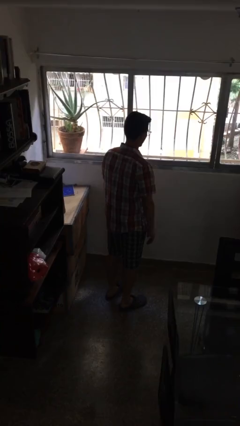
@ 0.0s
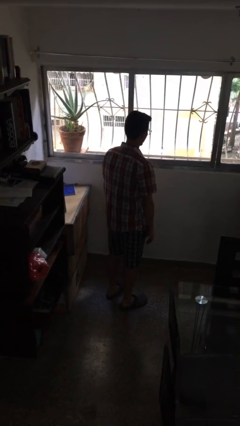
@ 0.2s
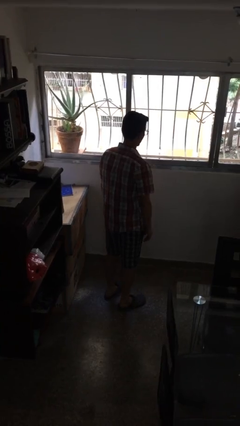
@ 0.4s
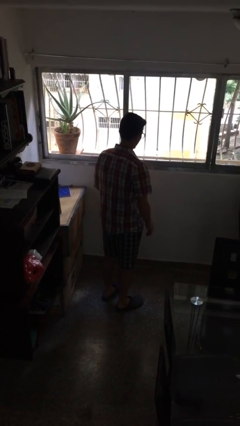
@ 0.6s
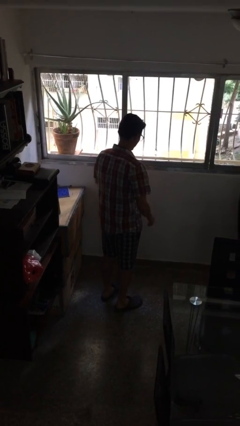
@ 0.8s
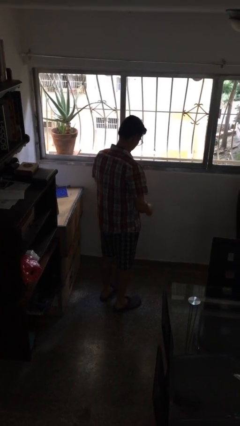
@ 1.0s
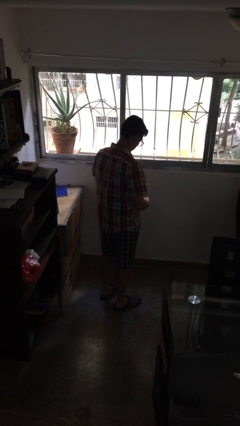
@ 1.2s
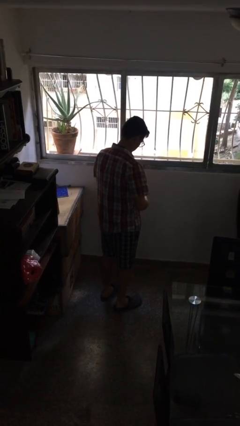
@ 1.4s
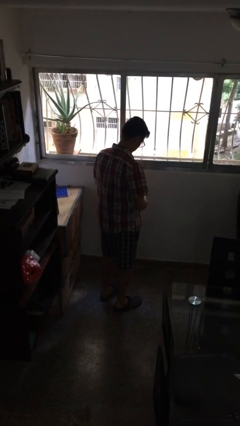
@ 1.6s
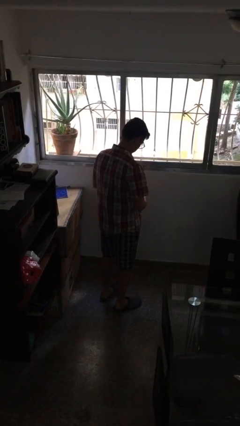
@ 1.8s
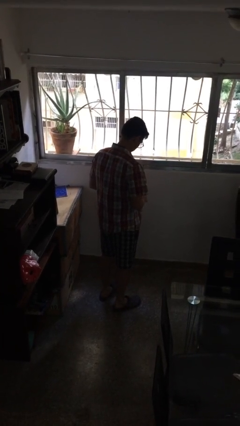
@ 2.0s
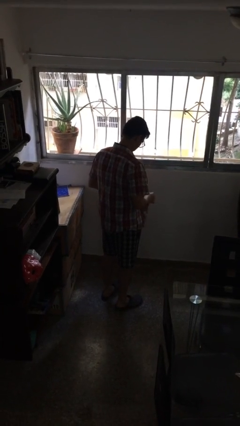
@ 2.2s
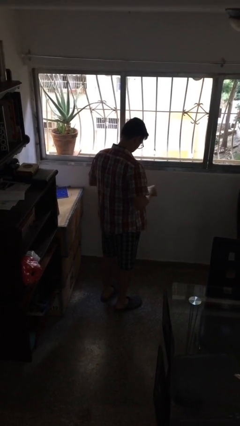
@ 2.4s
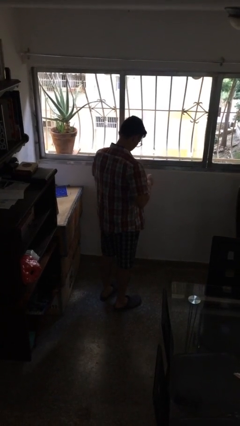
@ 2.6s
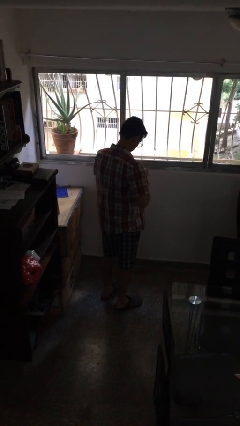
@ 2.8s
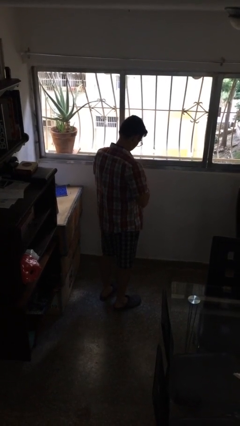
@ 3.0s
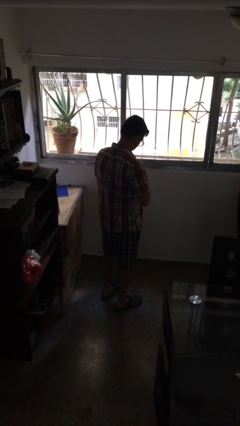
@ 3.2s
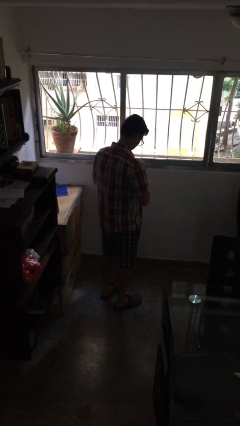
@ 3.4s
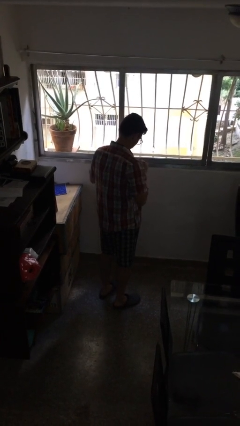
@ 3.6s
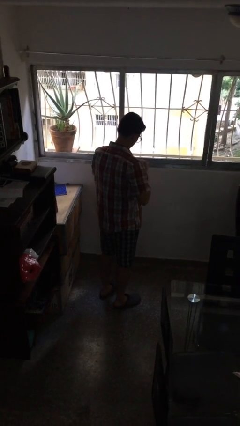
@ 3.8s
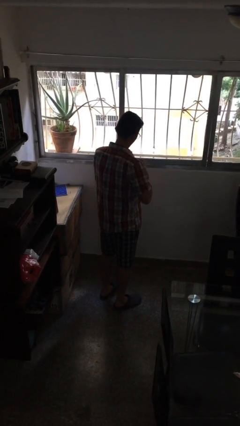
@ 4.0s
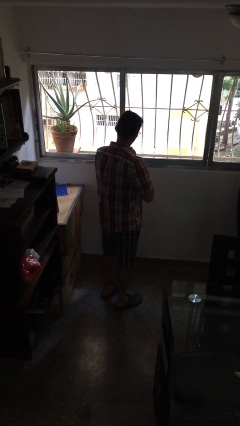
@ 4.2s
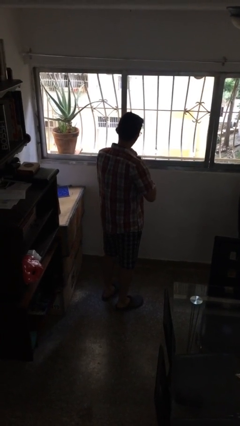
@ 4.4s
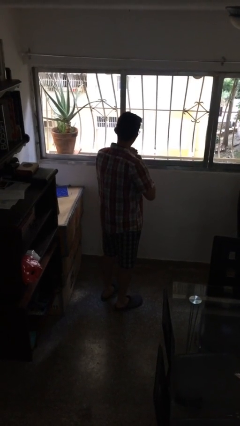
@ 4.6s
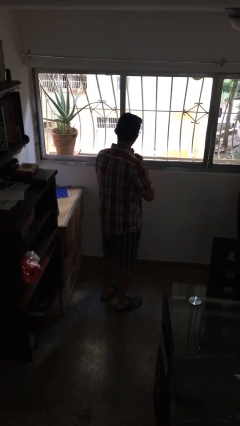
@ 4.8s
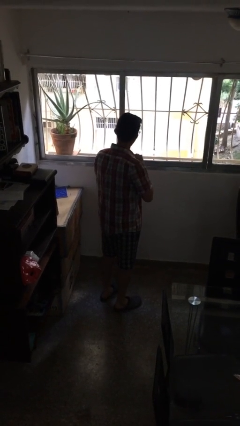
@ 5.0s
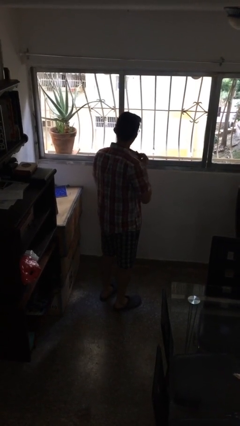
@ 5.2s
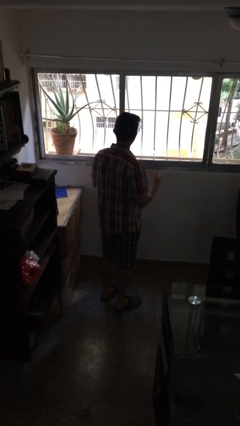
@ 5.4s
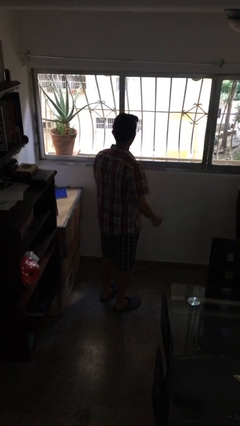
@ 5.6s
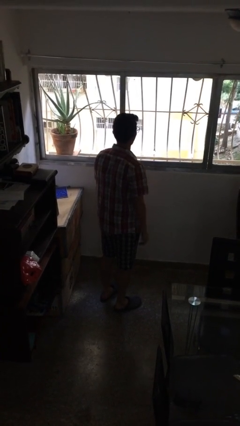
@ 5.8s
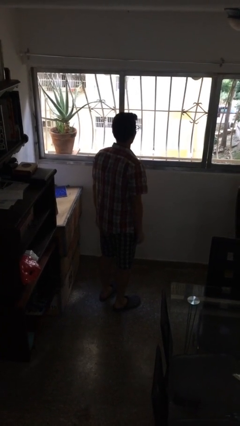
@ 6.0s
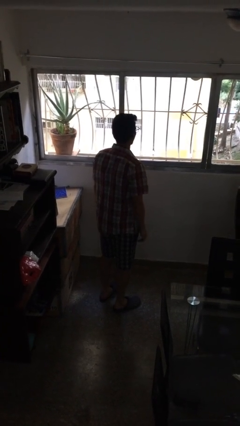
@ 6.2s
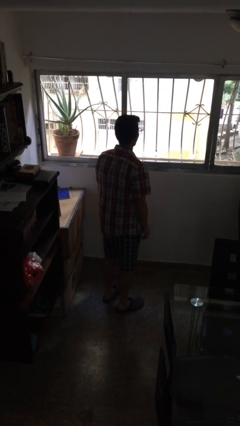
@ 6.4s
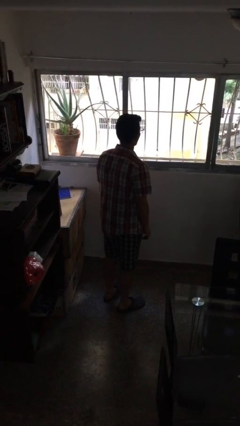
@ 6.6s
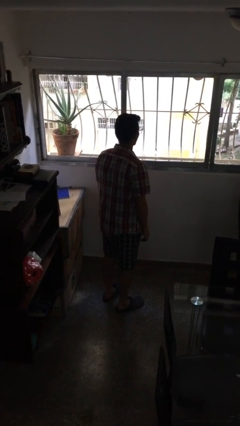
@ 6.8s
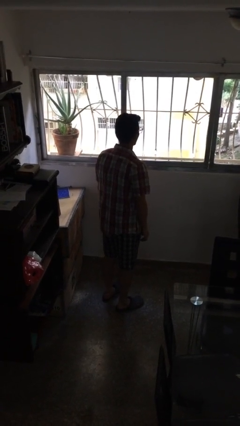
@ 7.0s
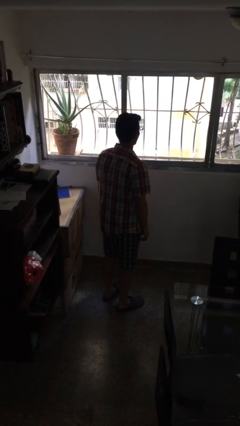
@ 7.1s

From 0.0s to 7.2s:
person buttons shirt

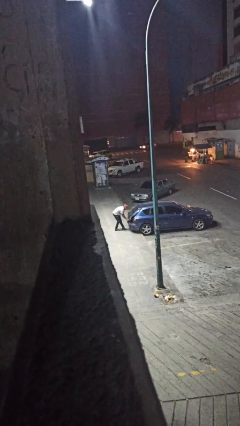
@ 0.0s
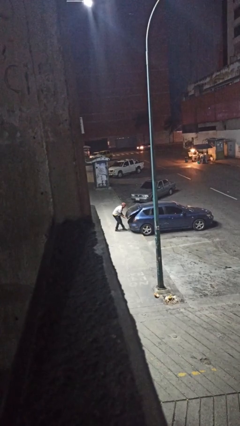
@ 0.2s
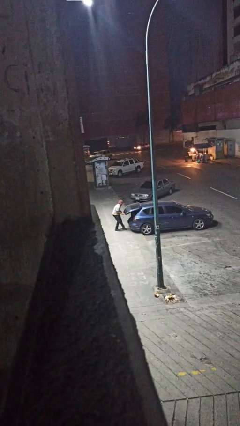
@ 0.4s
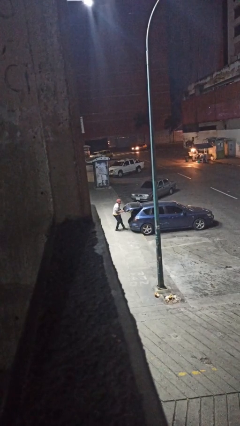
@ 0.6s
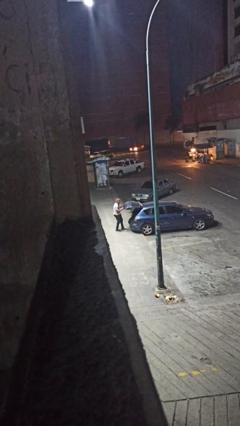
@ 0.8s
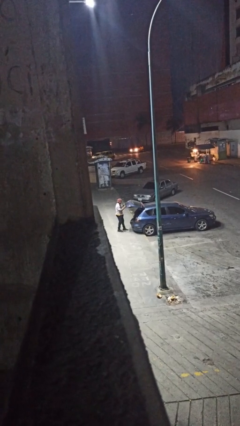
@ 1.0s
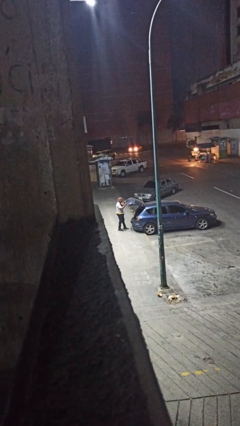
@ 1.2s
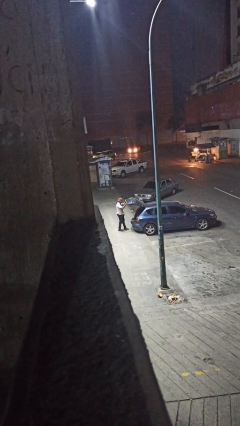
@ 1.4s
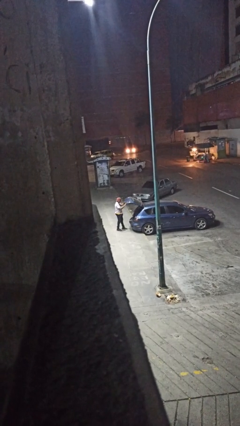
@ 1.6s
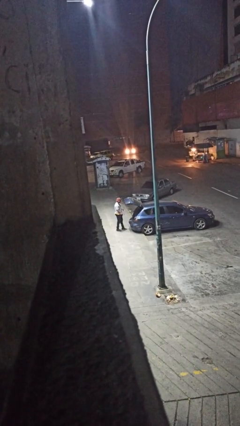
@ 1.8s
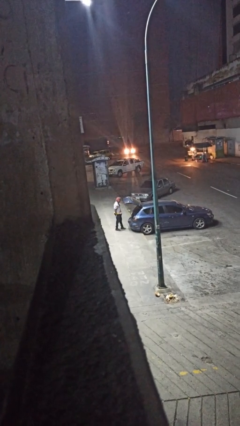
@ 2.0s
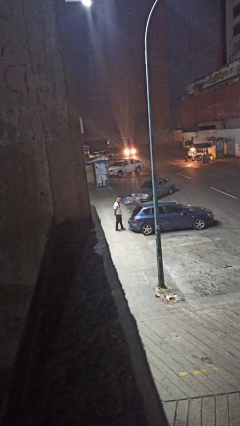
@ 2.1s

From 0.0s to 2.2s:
person opens car trunk

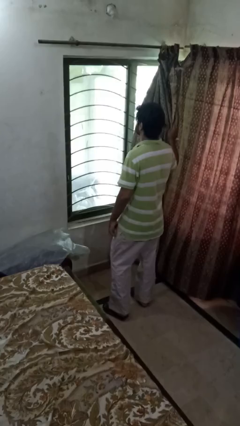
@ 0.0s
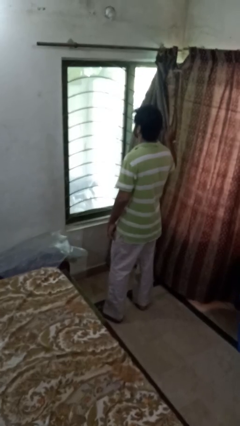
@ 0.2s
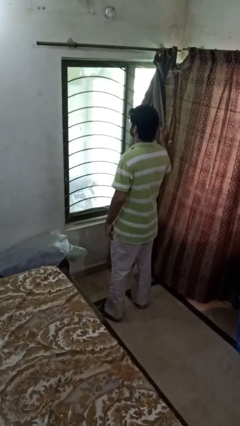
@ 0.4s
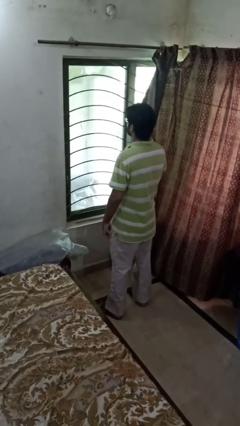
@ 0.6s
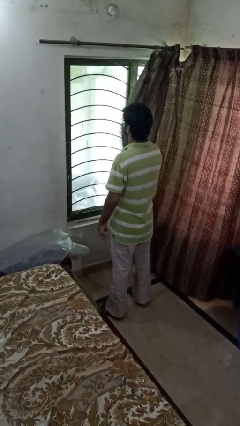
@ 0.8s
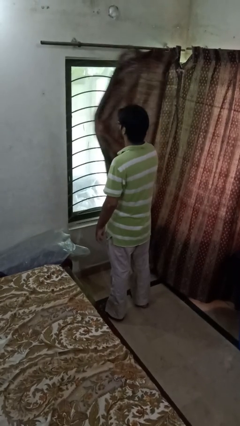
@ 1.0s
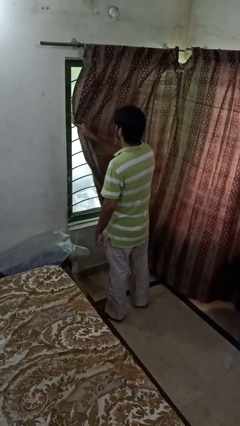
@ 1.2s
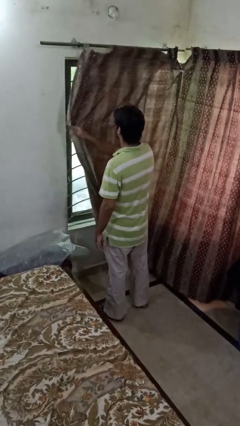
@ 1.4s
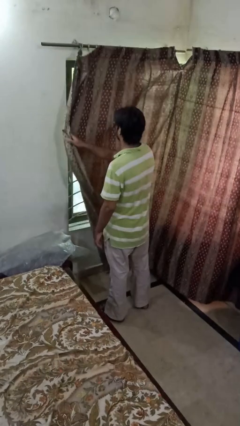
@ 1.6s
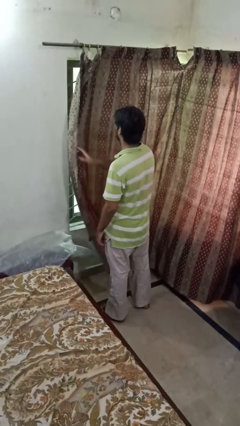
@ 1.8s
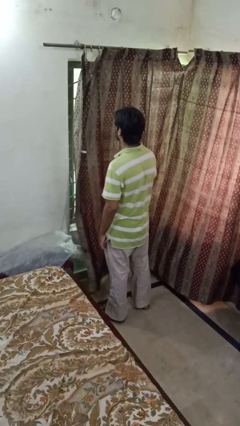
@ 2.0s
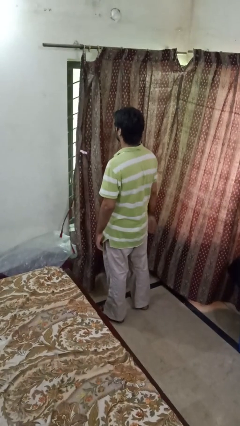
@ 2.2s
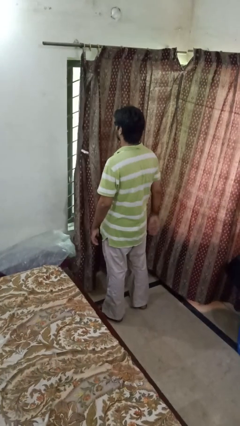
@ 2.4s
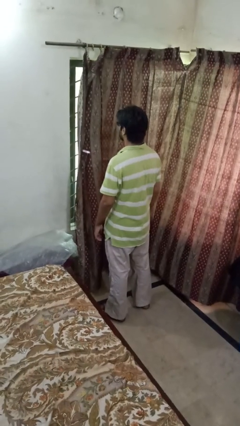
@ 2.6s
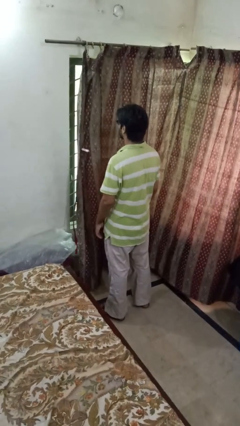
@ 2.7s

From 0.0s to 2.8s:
person closes curtains

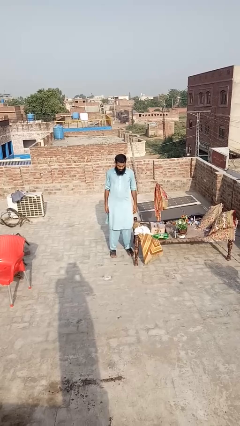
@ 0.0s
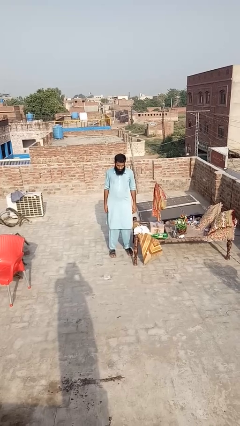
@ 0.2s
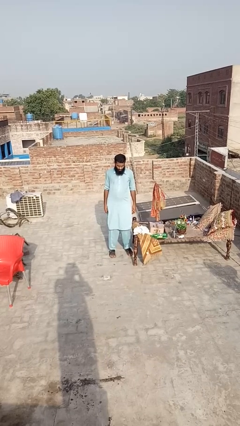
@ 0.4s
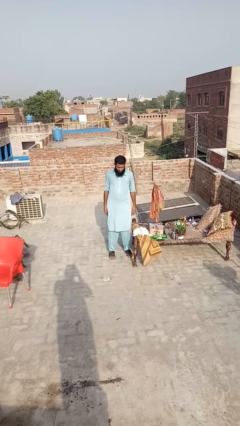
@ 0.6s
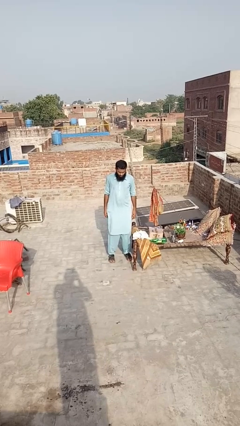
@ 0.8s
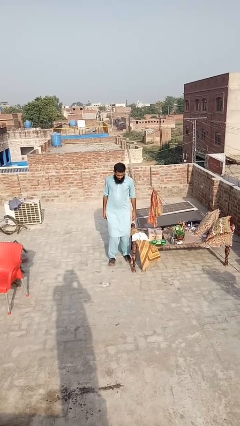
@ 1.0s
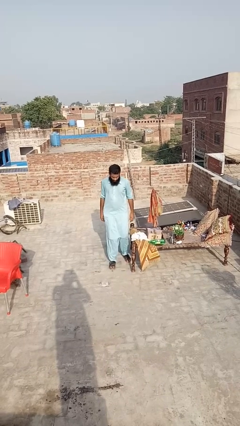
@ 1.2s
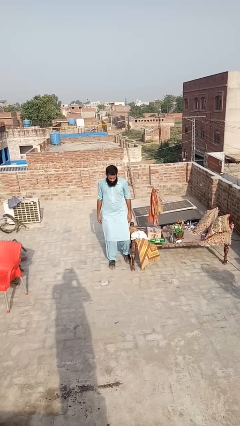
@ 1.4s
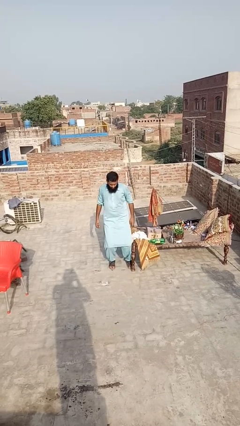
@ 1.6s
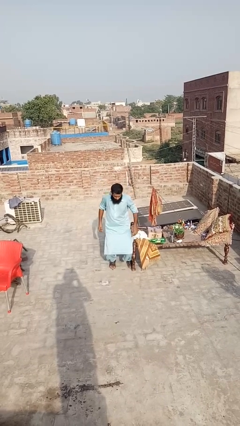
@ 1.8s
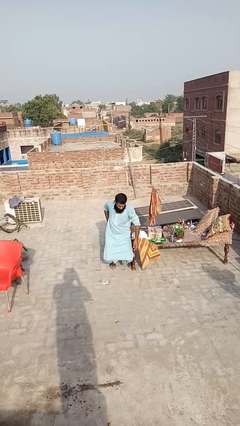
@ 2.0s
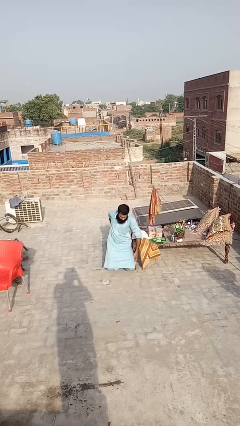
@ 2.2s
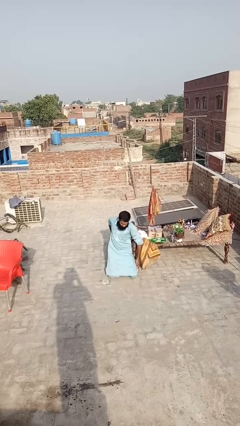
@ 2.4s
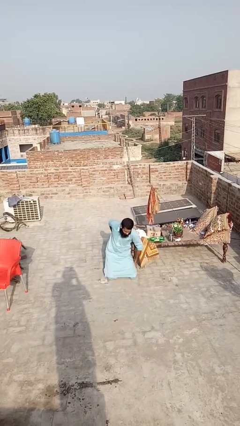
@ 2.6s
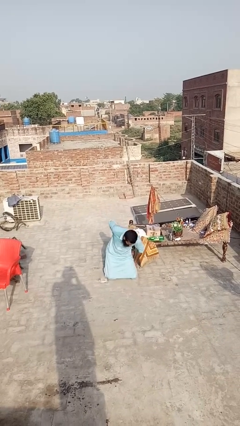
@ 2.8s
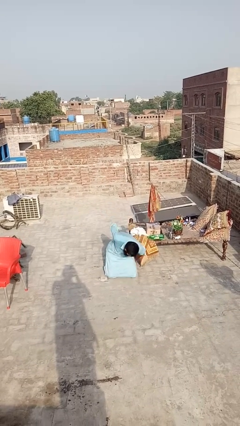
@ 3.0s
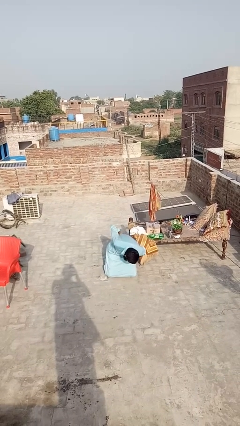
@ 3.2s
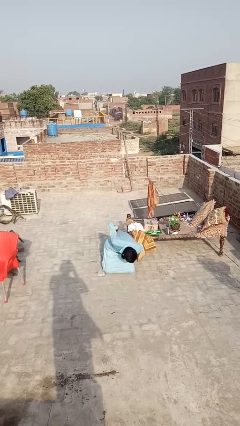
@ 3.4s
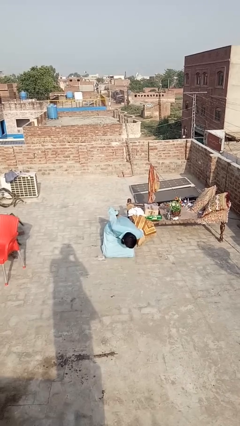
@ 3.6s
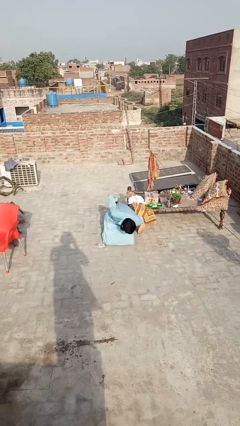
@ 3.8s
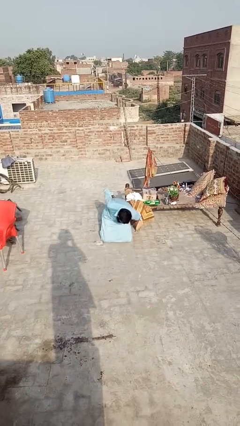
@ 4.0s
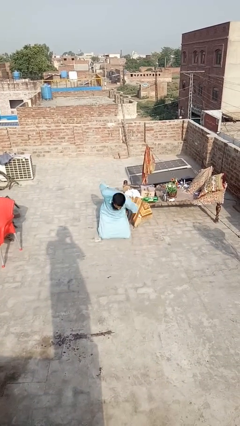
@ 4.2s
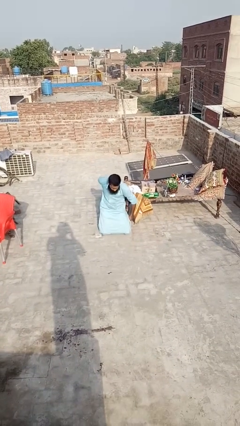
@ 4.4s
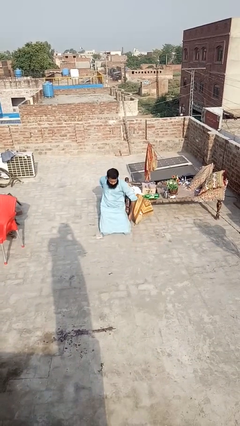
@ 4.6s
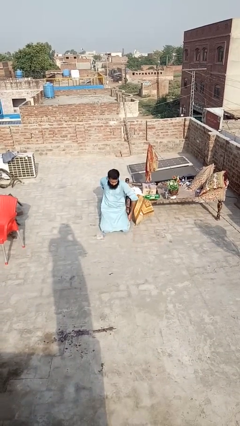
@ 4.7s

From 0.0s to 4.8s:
person bumps into table

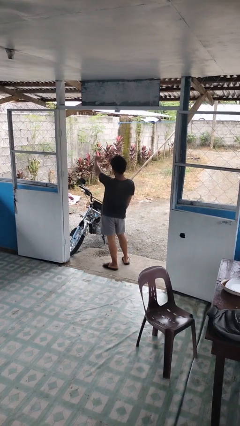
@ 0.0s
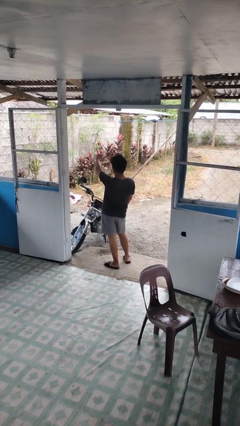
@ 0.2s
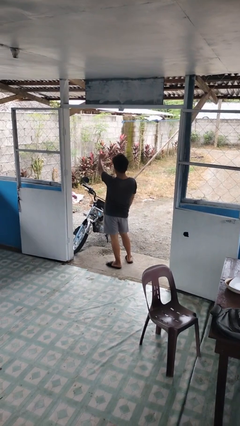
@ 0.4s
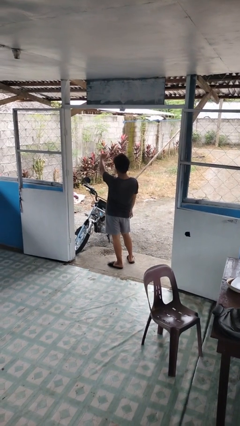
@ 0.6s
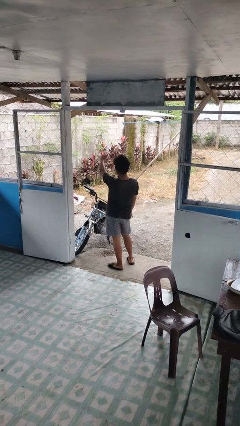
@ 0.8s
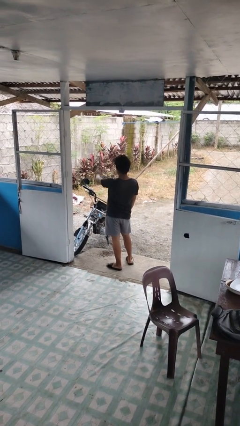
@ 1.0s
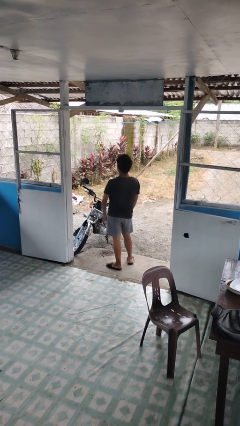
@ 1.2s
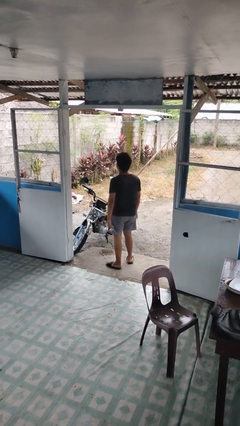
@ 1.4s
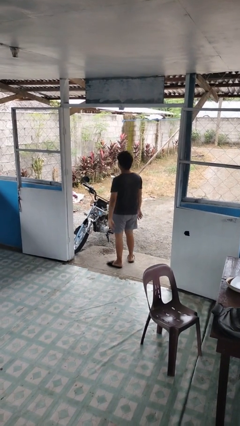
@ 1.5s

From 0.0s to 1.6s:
person gestures thumbs down
